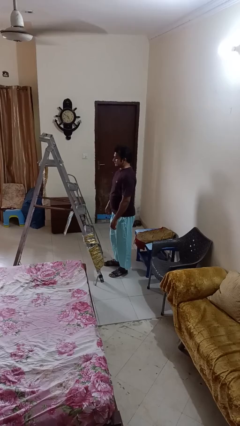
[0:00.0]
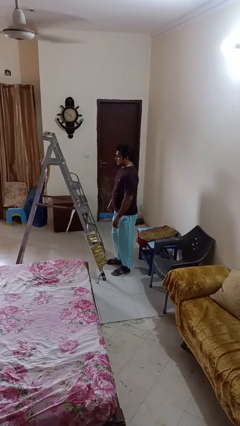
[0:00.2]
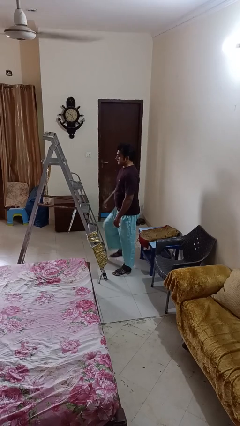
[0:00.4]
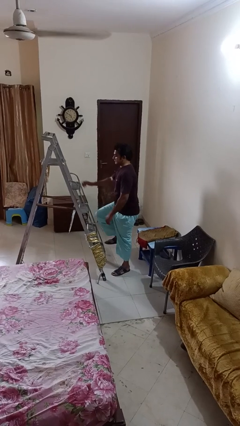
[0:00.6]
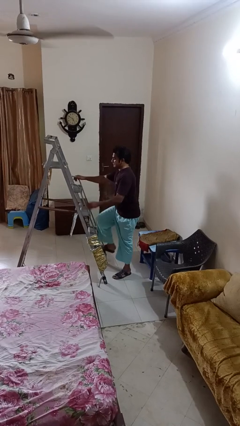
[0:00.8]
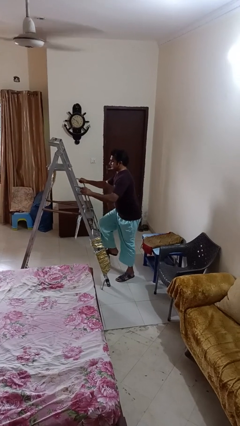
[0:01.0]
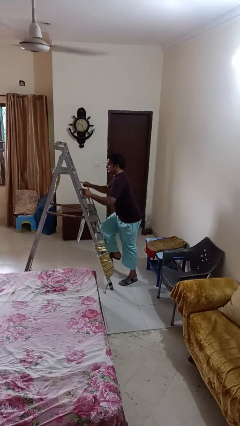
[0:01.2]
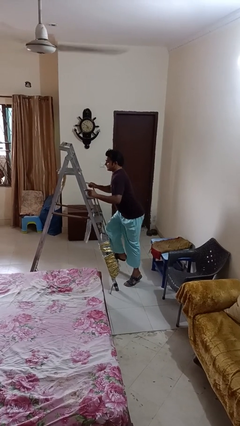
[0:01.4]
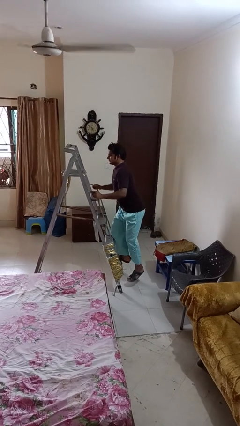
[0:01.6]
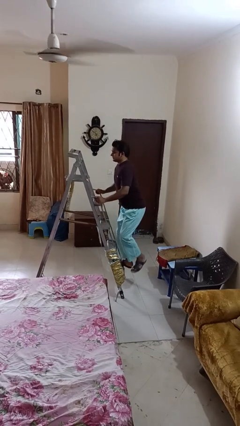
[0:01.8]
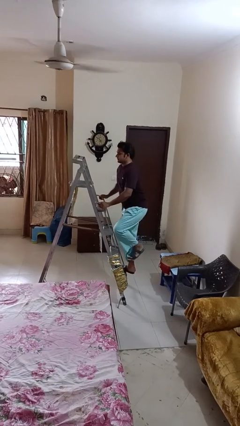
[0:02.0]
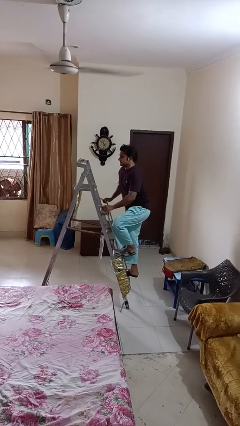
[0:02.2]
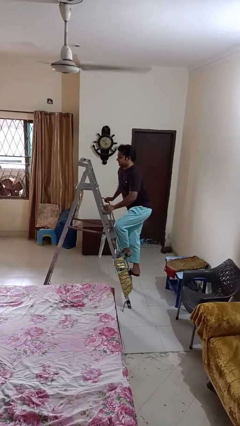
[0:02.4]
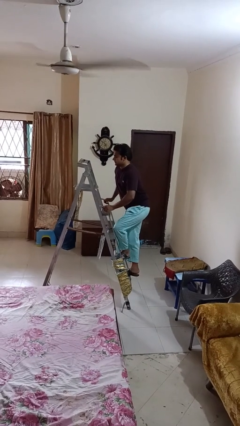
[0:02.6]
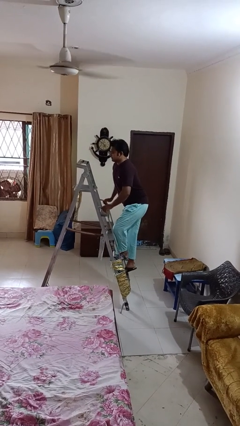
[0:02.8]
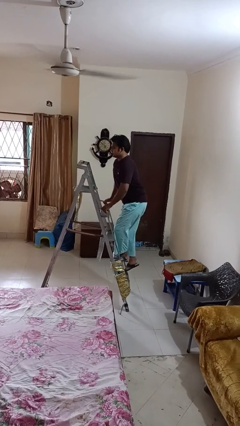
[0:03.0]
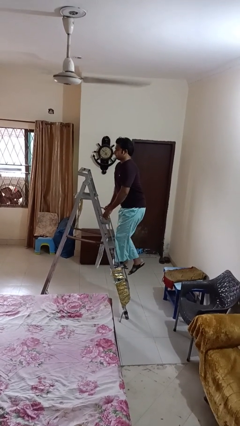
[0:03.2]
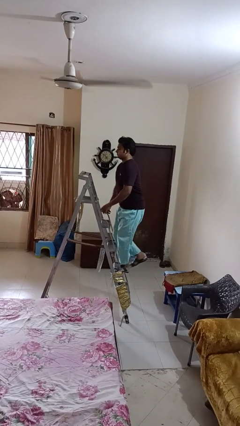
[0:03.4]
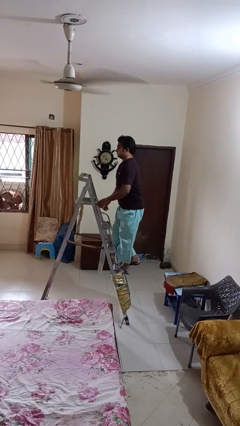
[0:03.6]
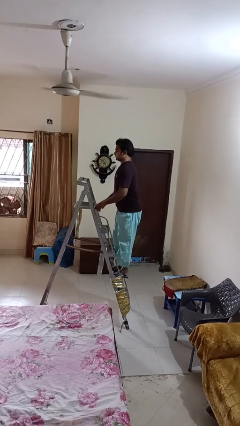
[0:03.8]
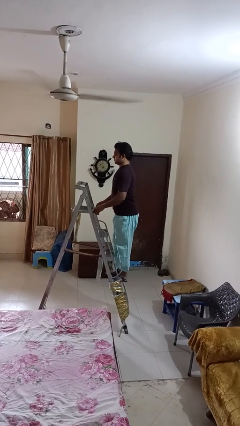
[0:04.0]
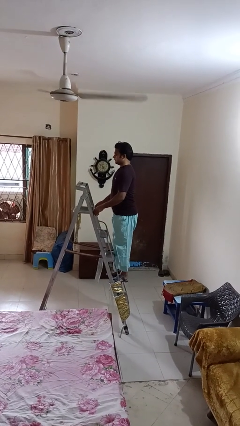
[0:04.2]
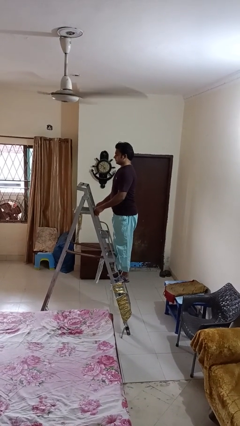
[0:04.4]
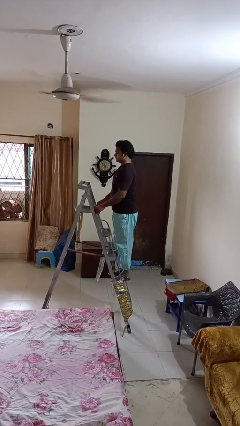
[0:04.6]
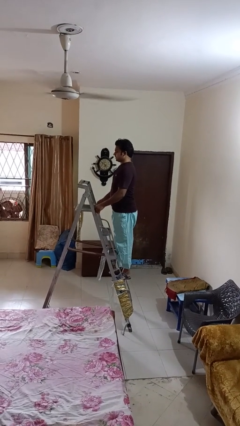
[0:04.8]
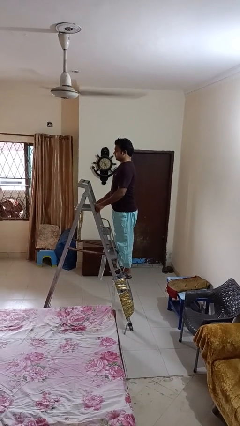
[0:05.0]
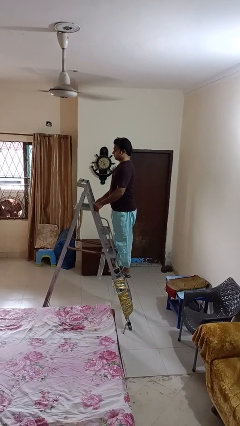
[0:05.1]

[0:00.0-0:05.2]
person climbs up ladder

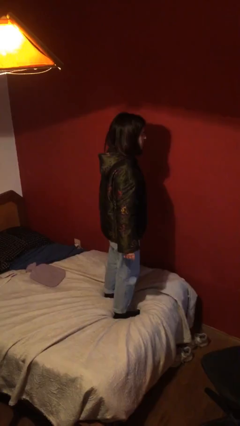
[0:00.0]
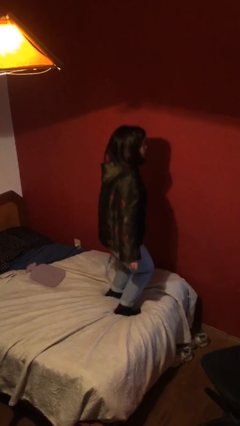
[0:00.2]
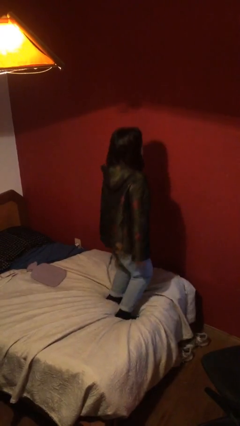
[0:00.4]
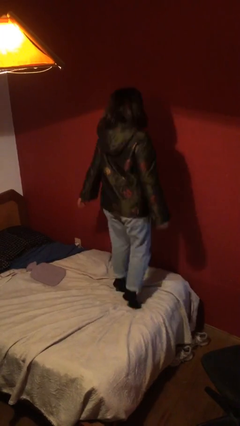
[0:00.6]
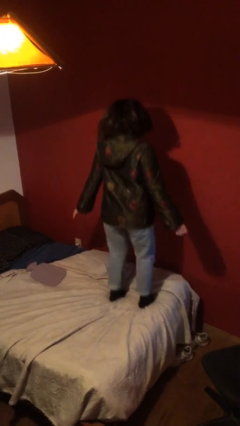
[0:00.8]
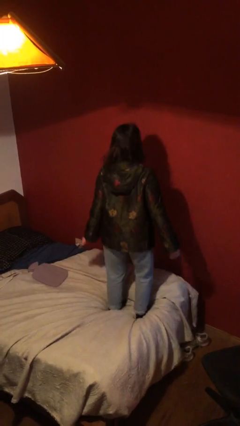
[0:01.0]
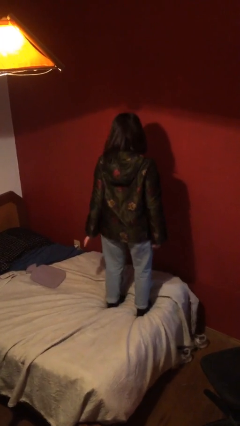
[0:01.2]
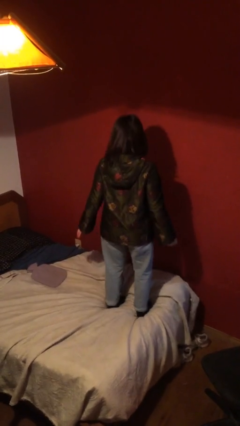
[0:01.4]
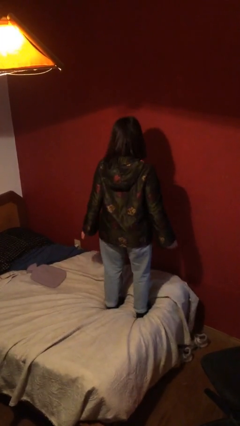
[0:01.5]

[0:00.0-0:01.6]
person jumps on bed

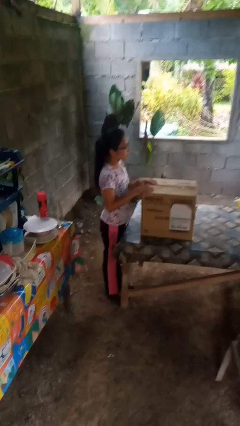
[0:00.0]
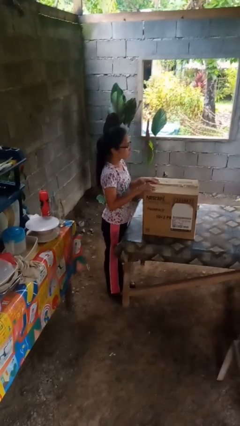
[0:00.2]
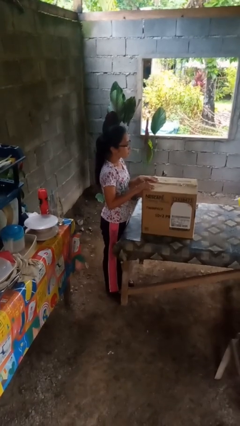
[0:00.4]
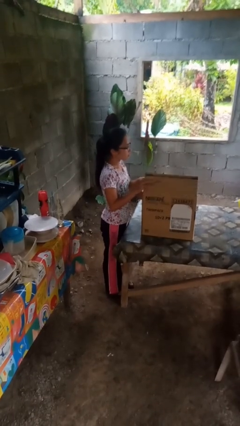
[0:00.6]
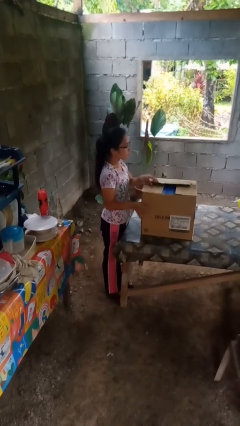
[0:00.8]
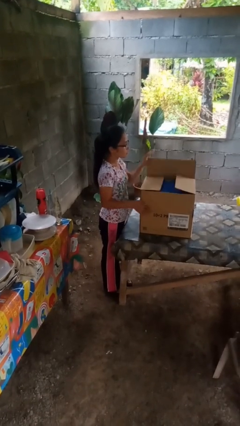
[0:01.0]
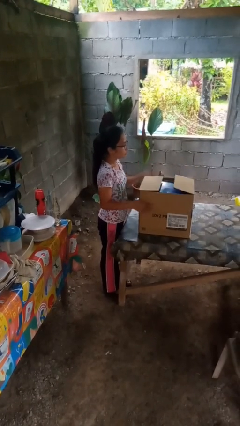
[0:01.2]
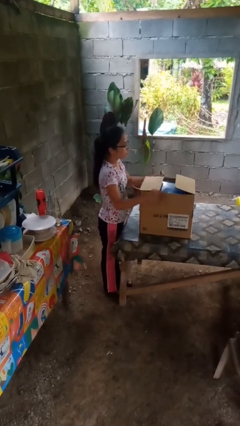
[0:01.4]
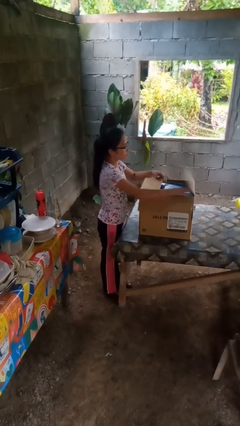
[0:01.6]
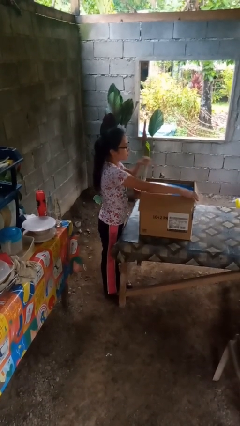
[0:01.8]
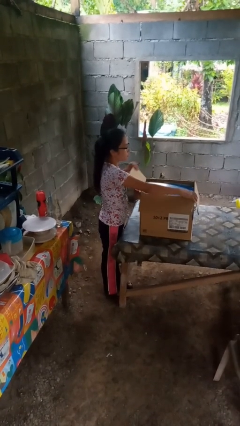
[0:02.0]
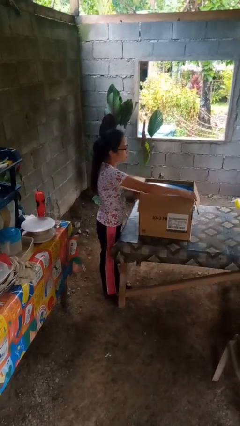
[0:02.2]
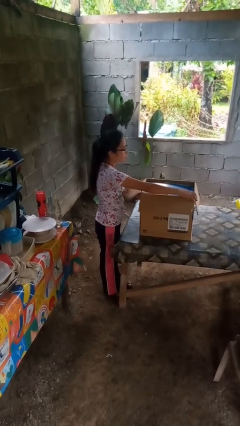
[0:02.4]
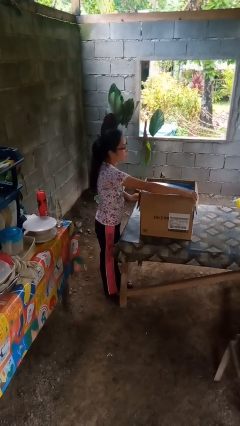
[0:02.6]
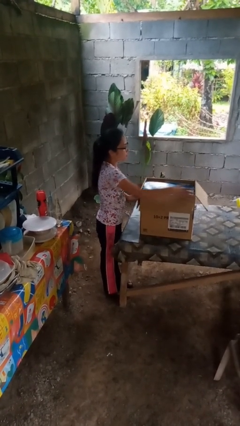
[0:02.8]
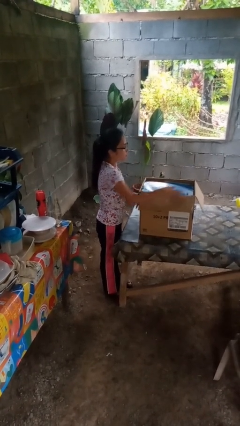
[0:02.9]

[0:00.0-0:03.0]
person opens box

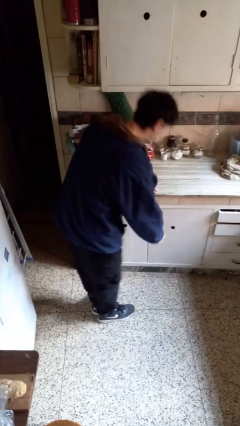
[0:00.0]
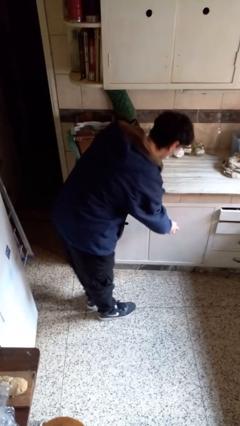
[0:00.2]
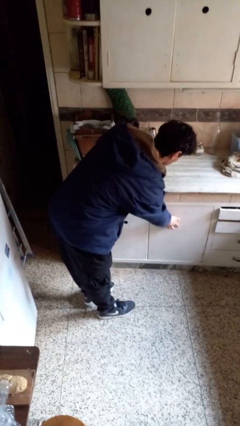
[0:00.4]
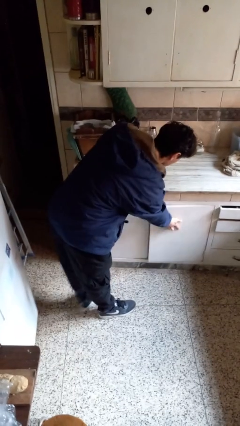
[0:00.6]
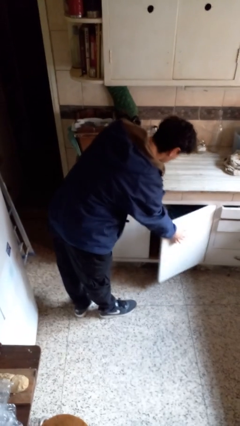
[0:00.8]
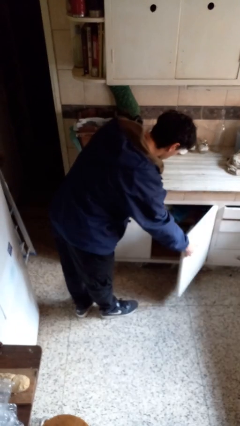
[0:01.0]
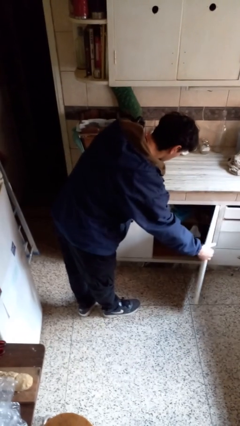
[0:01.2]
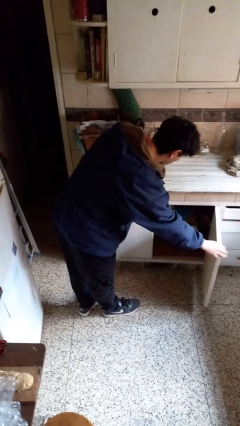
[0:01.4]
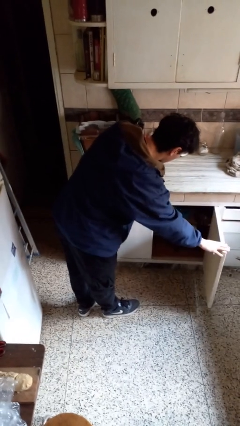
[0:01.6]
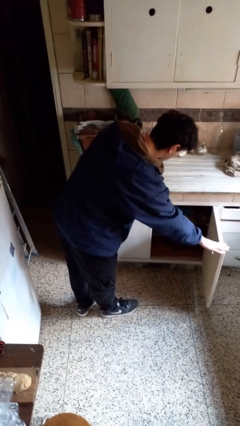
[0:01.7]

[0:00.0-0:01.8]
person opens cabinet

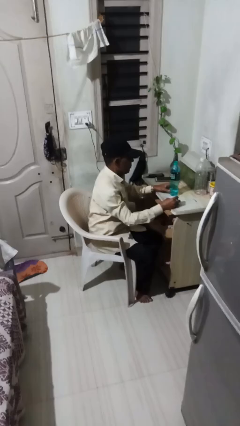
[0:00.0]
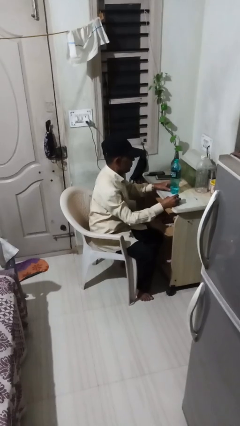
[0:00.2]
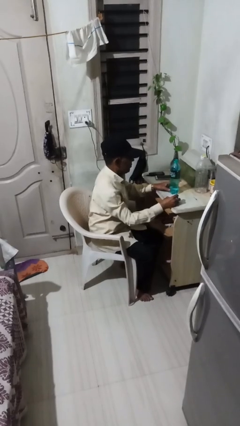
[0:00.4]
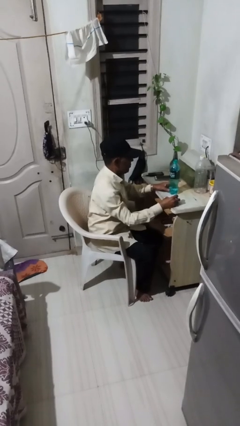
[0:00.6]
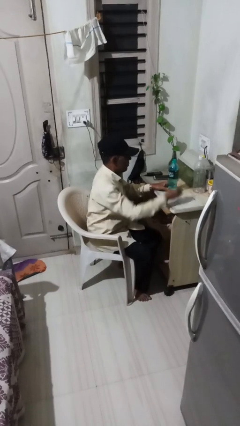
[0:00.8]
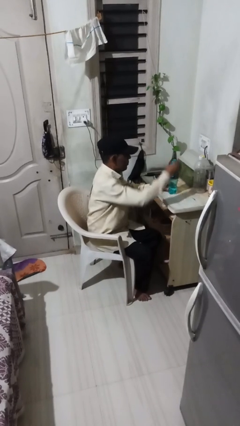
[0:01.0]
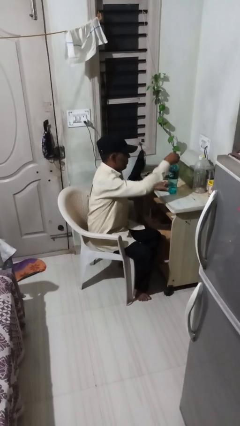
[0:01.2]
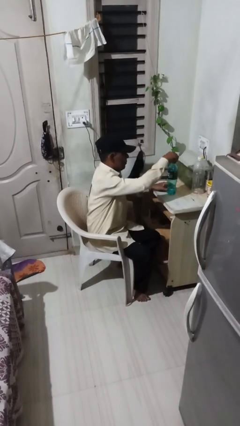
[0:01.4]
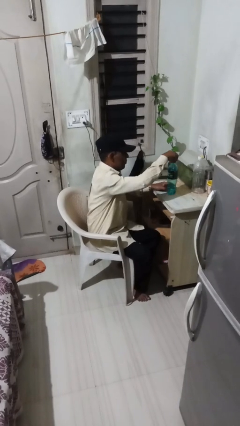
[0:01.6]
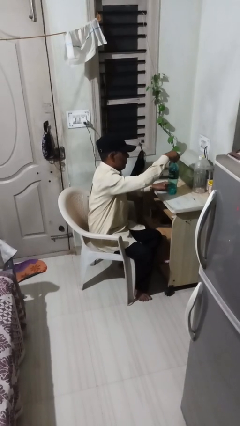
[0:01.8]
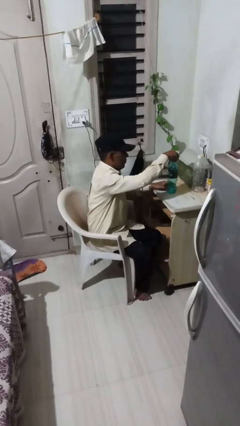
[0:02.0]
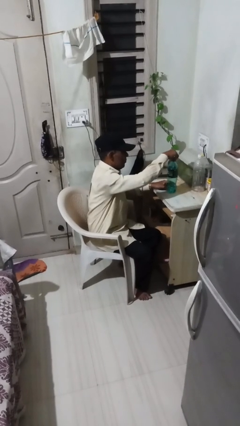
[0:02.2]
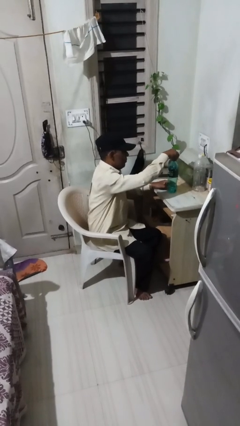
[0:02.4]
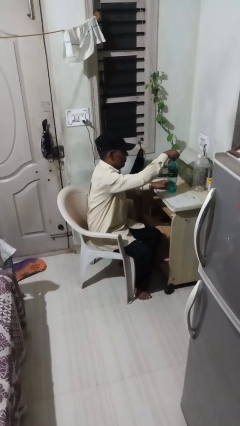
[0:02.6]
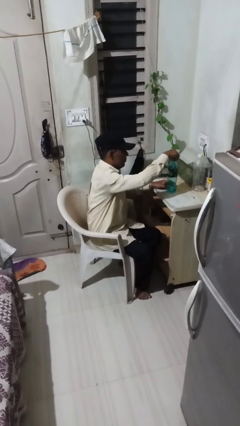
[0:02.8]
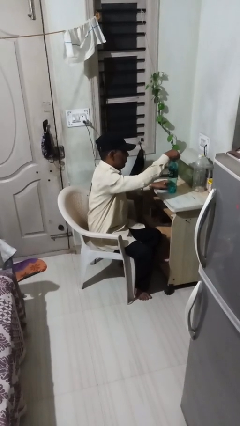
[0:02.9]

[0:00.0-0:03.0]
person screws lid to bottle

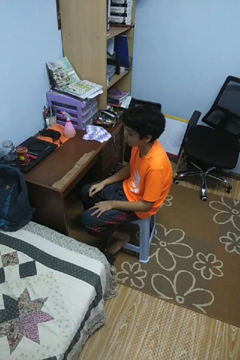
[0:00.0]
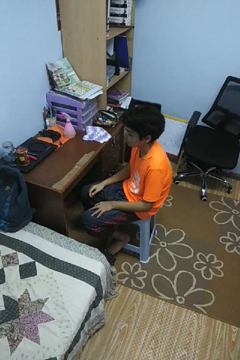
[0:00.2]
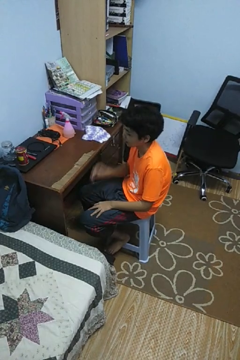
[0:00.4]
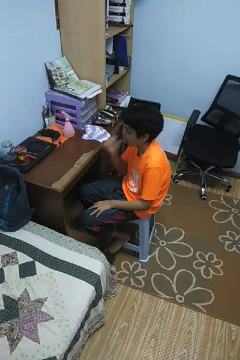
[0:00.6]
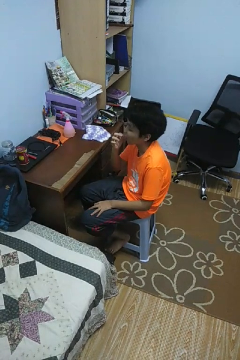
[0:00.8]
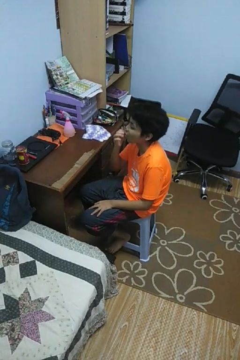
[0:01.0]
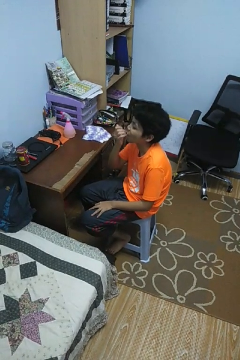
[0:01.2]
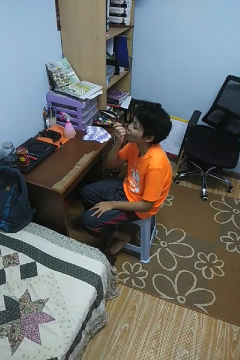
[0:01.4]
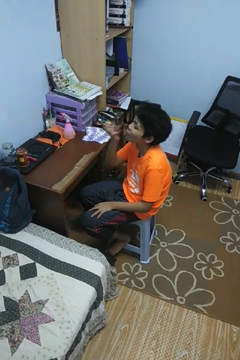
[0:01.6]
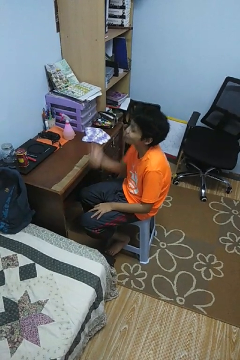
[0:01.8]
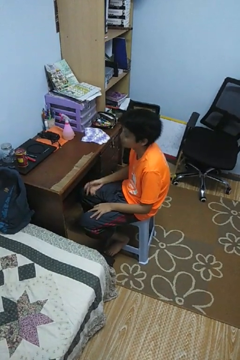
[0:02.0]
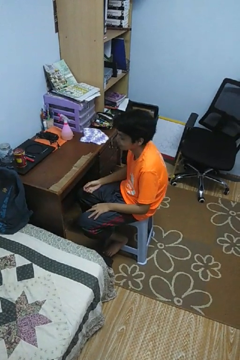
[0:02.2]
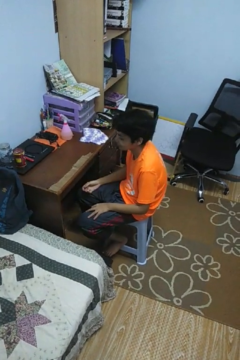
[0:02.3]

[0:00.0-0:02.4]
person licks fingers

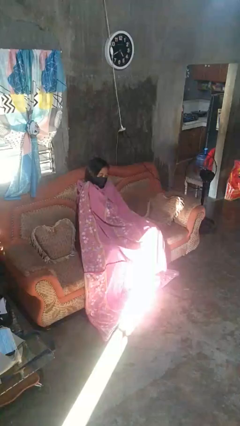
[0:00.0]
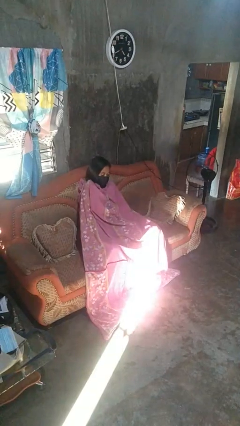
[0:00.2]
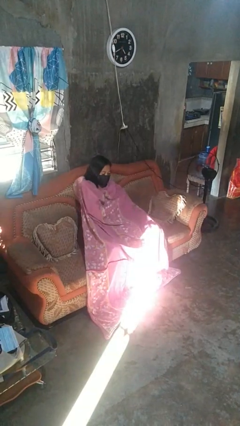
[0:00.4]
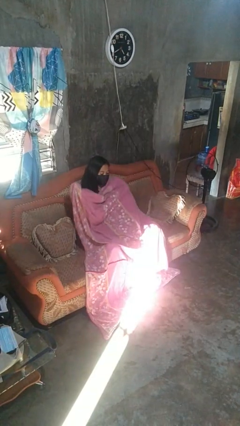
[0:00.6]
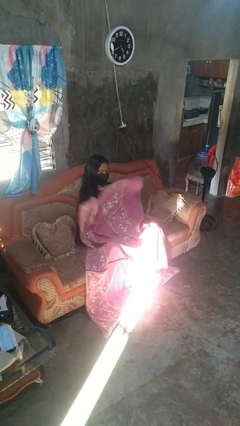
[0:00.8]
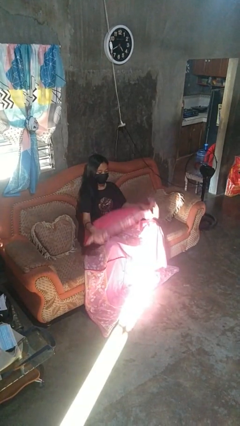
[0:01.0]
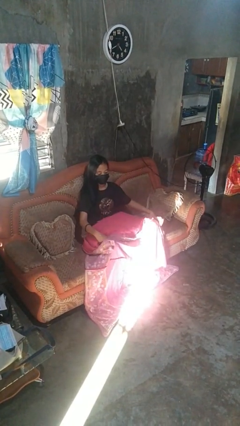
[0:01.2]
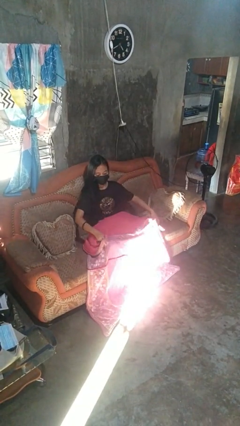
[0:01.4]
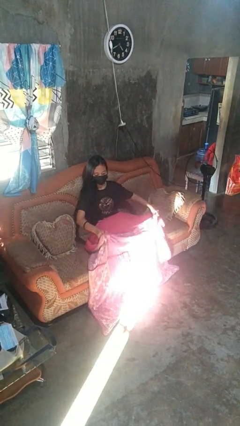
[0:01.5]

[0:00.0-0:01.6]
person uncovers with blanket
